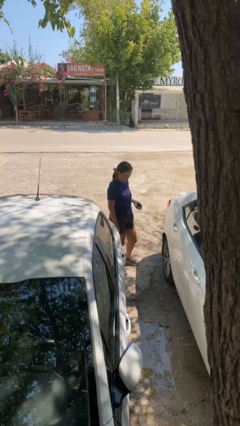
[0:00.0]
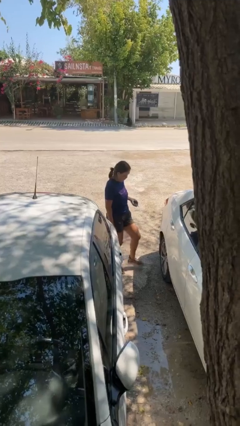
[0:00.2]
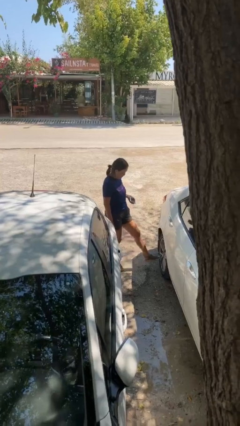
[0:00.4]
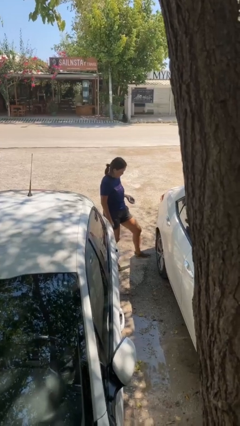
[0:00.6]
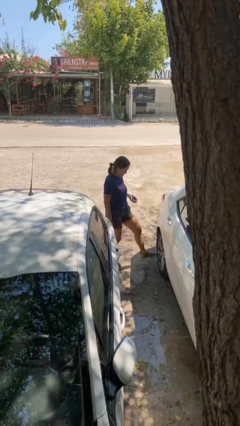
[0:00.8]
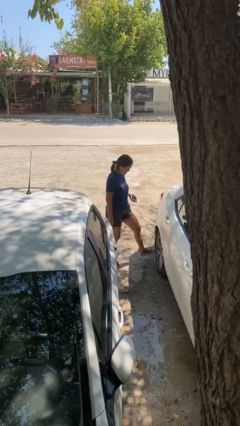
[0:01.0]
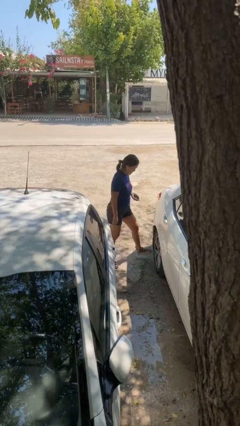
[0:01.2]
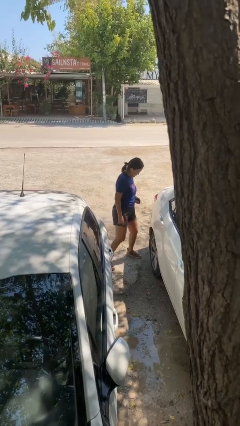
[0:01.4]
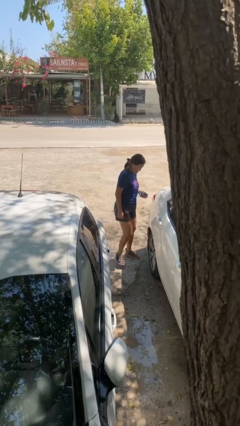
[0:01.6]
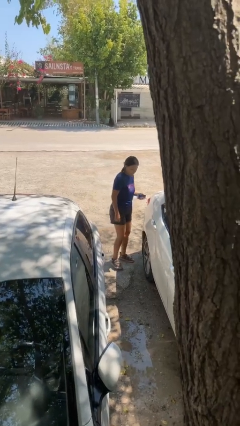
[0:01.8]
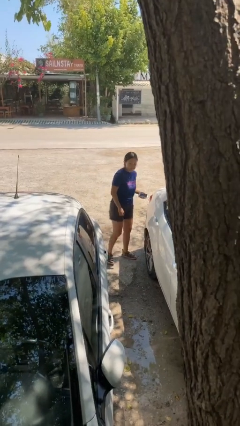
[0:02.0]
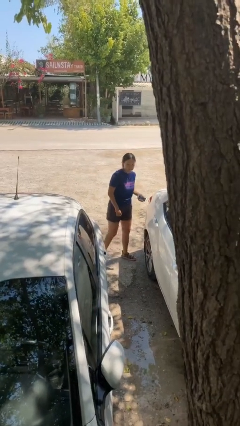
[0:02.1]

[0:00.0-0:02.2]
person kicks car tires

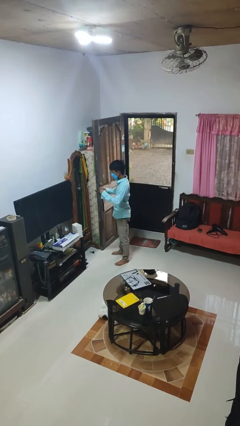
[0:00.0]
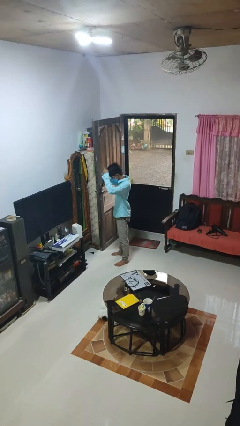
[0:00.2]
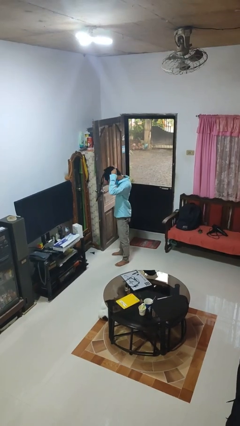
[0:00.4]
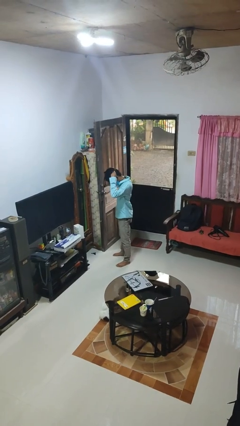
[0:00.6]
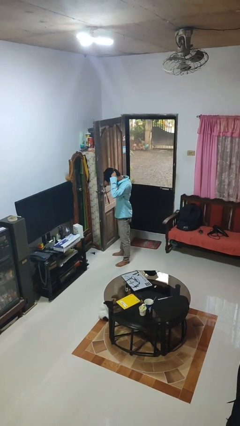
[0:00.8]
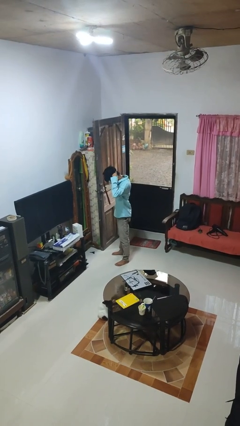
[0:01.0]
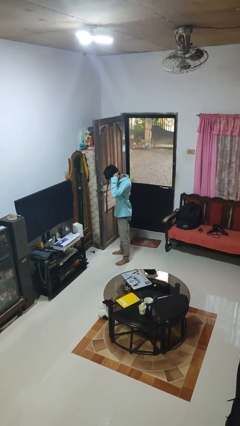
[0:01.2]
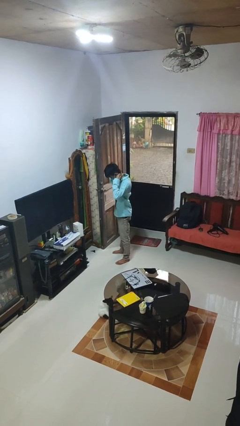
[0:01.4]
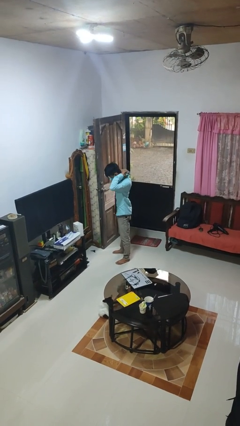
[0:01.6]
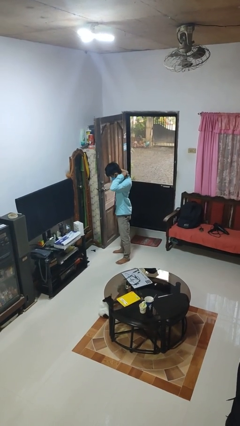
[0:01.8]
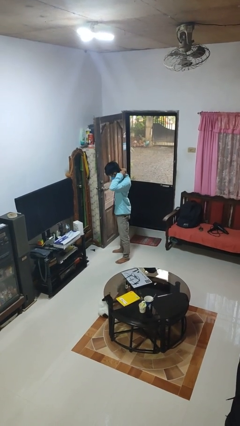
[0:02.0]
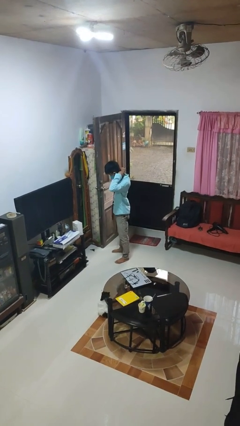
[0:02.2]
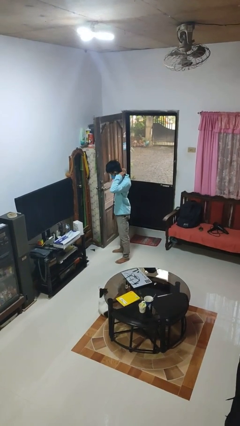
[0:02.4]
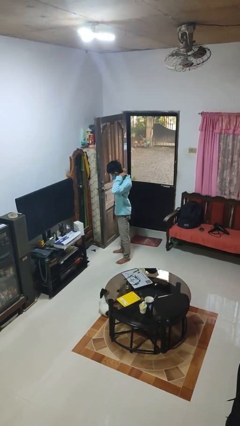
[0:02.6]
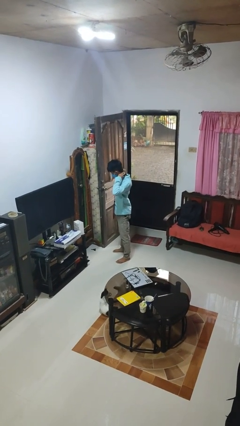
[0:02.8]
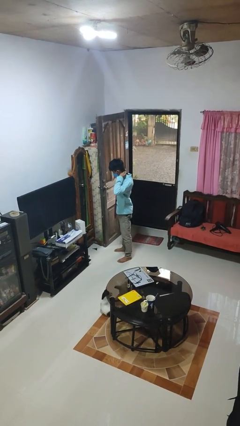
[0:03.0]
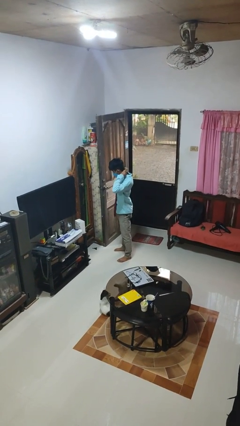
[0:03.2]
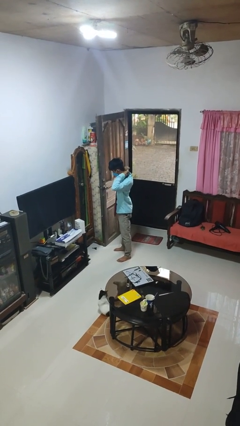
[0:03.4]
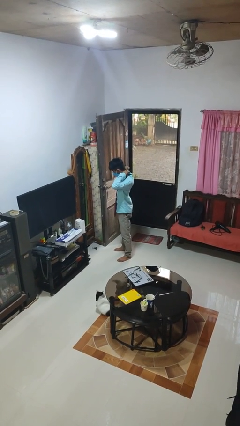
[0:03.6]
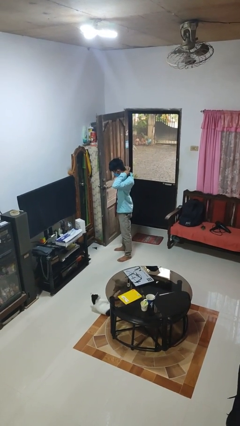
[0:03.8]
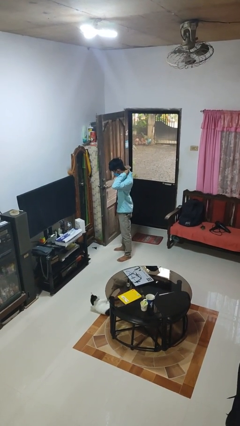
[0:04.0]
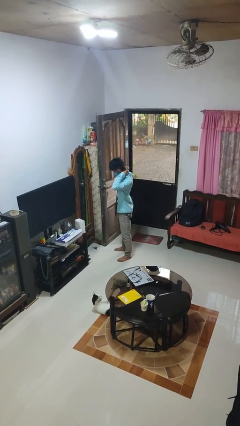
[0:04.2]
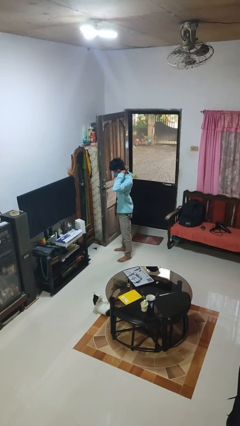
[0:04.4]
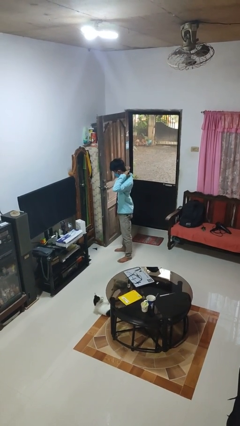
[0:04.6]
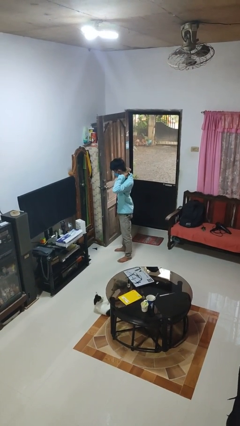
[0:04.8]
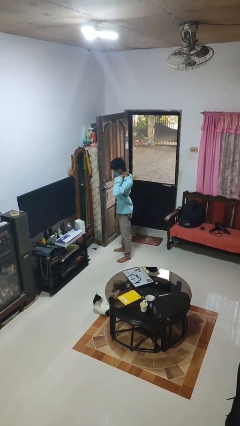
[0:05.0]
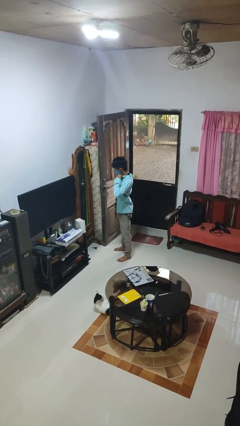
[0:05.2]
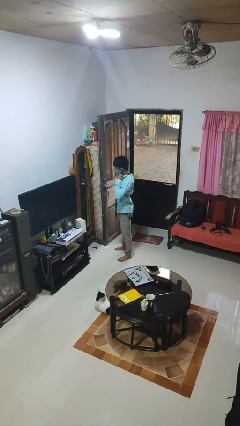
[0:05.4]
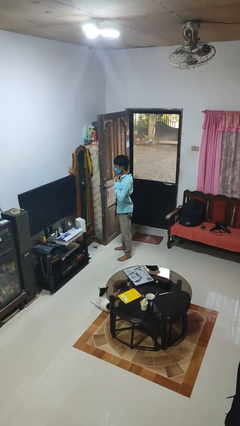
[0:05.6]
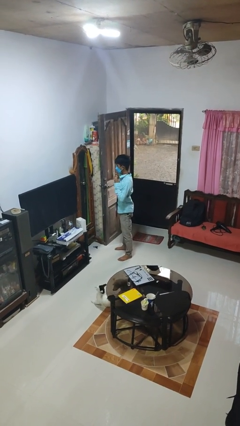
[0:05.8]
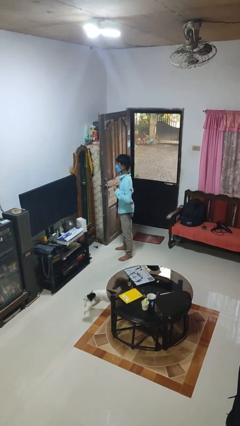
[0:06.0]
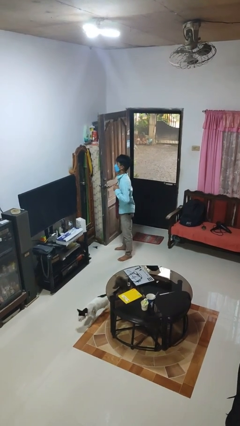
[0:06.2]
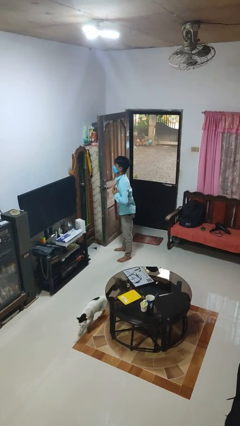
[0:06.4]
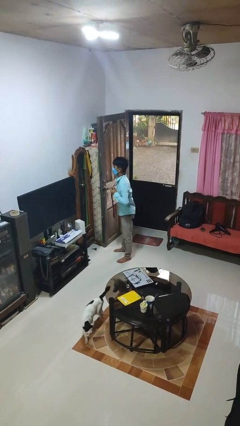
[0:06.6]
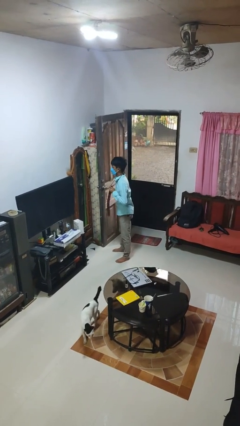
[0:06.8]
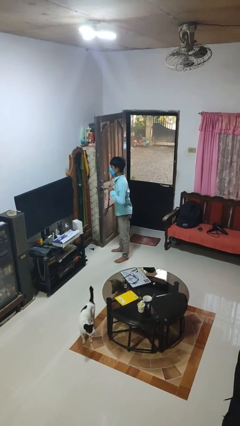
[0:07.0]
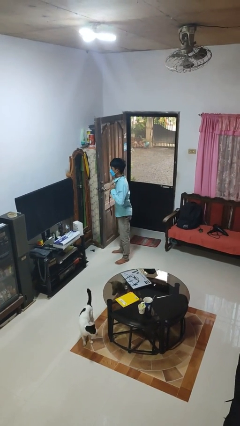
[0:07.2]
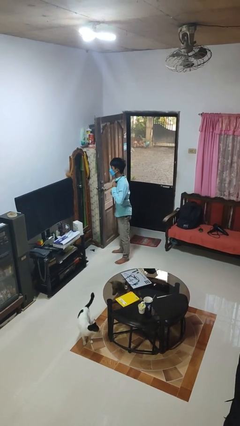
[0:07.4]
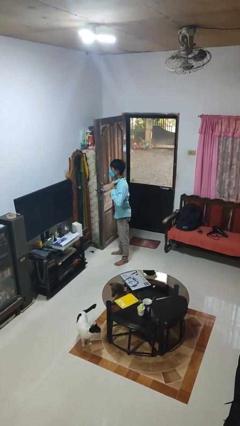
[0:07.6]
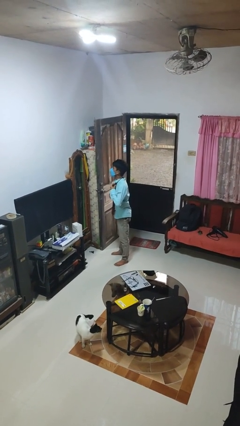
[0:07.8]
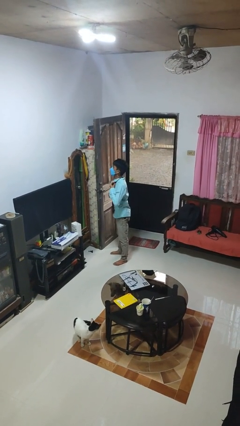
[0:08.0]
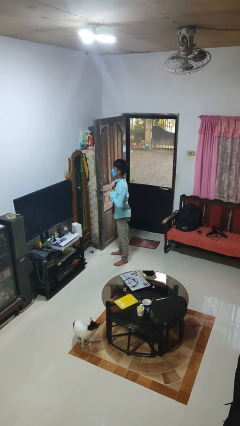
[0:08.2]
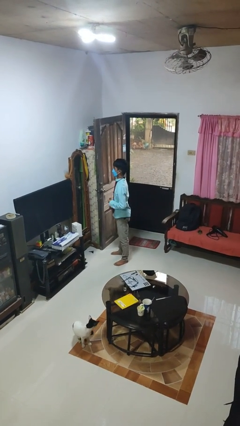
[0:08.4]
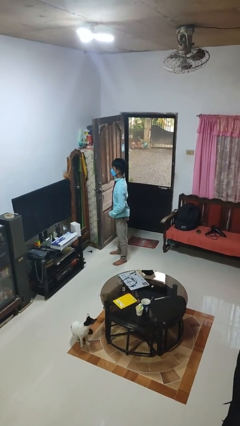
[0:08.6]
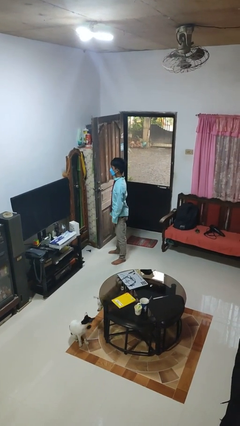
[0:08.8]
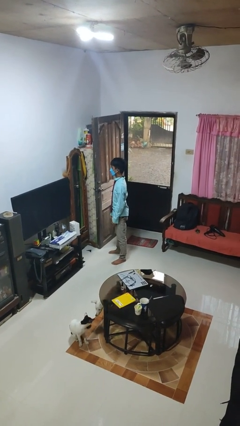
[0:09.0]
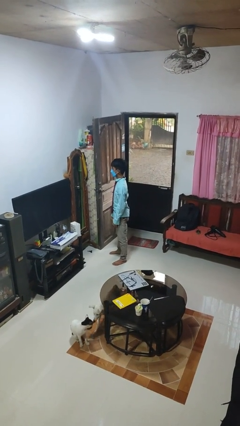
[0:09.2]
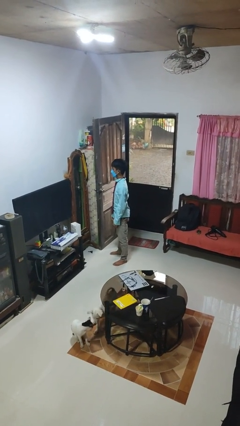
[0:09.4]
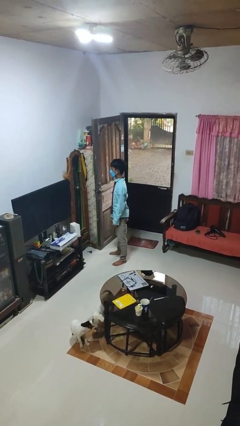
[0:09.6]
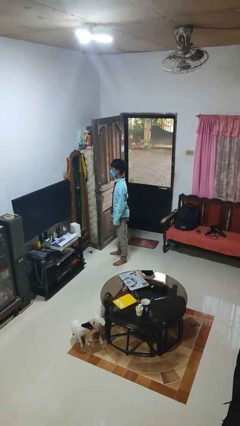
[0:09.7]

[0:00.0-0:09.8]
person puts on necktie

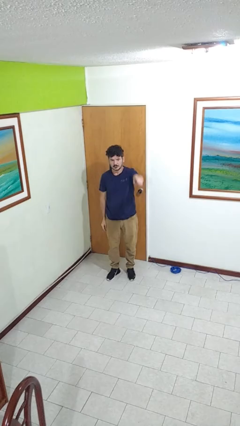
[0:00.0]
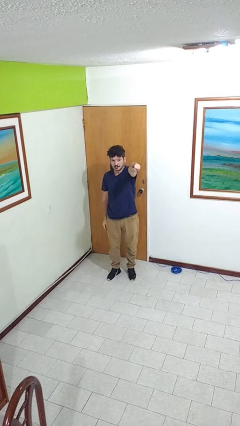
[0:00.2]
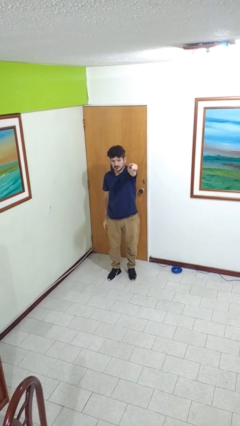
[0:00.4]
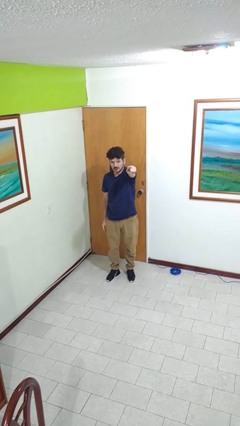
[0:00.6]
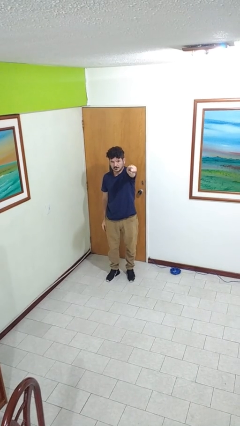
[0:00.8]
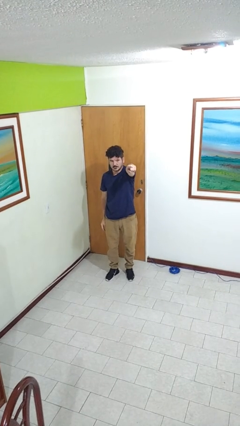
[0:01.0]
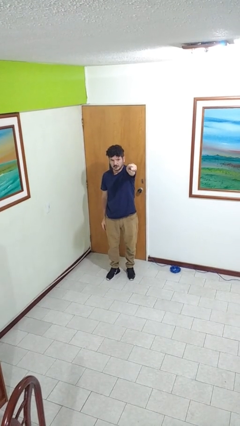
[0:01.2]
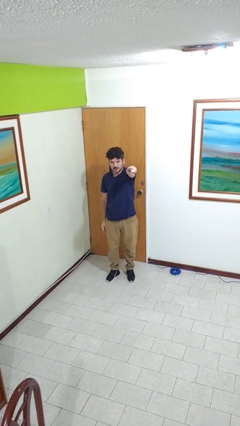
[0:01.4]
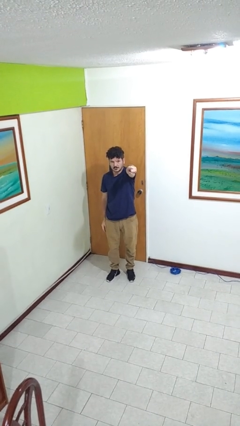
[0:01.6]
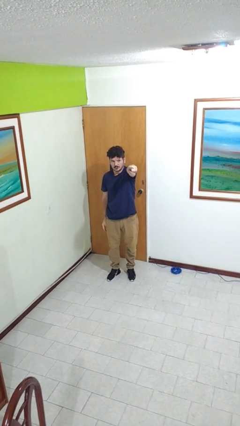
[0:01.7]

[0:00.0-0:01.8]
person points at person

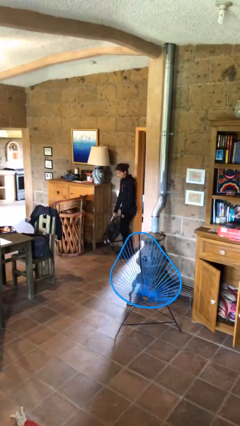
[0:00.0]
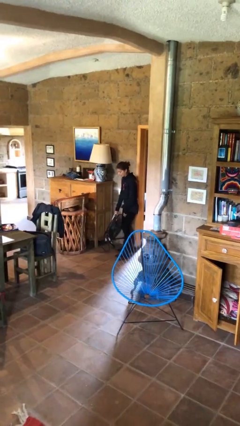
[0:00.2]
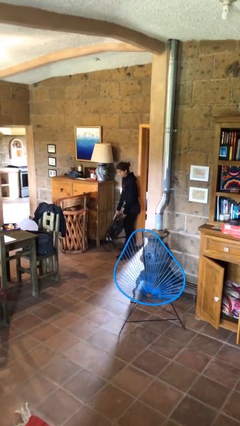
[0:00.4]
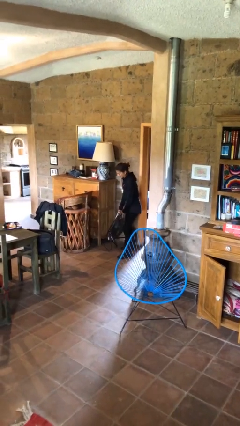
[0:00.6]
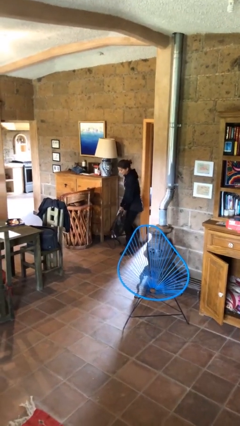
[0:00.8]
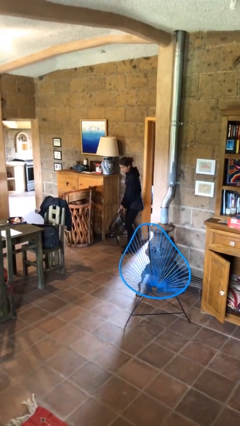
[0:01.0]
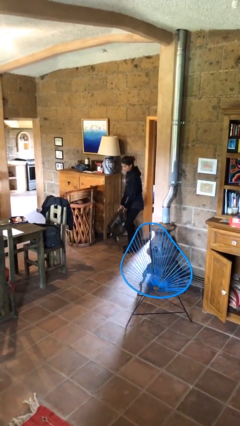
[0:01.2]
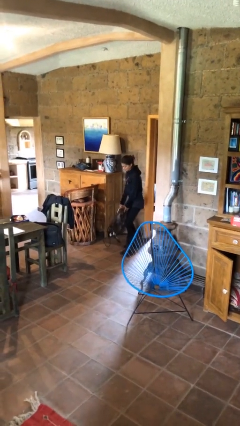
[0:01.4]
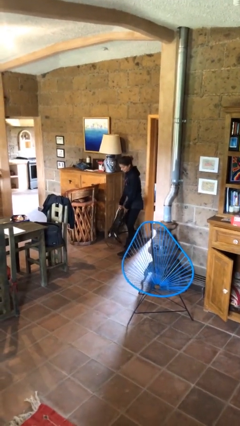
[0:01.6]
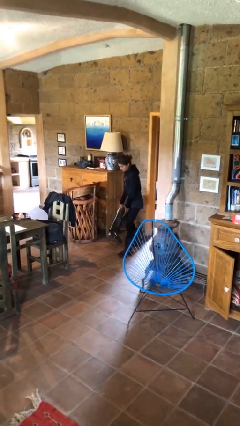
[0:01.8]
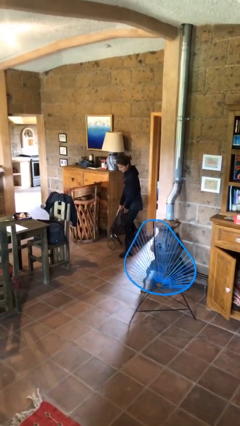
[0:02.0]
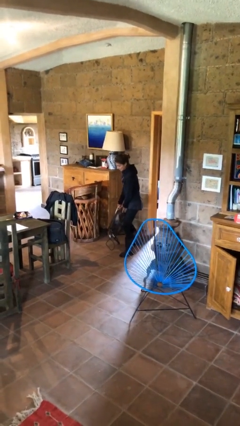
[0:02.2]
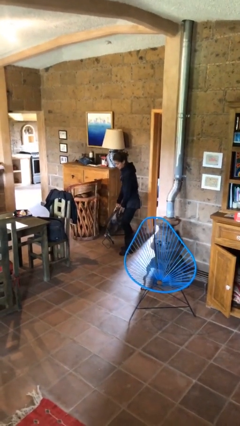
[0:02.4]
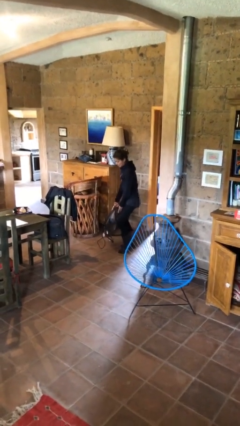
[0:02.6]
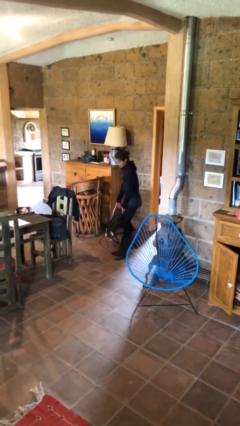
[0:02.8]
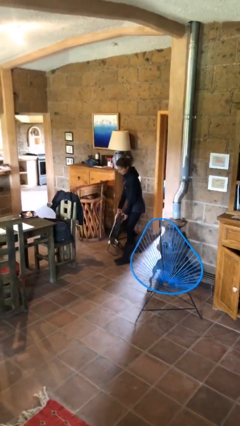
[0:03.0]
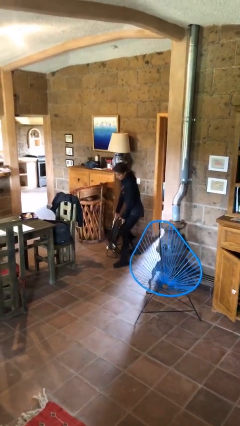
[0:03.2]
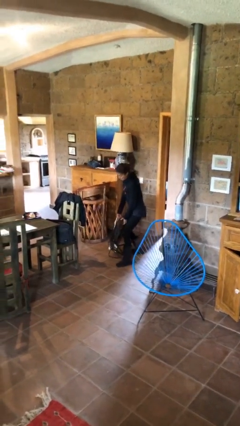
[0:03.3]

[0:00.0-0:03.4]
person carries heavy object

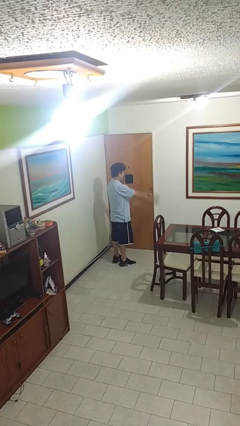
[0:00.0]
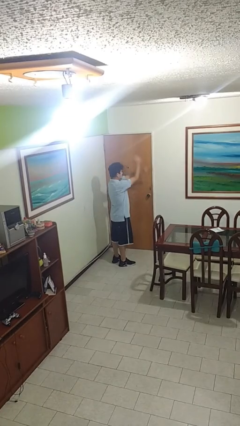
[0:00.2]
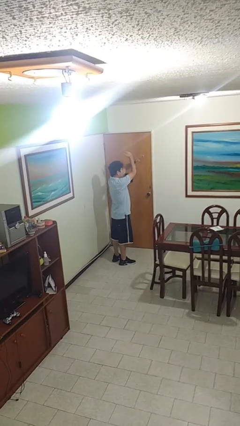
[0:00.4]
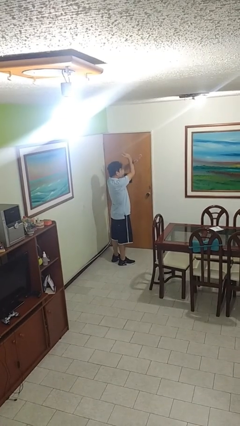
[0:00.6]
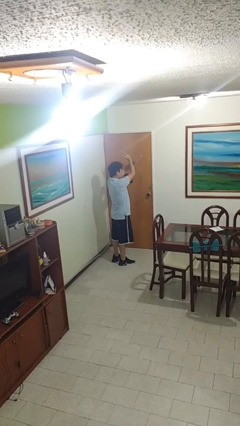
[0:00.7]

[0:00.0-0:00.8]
person gestures arms x
